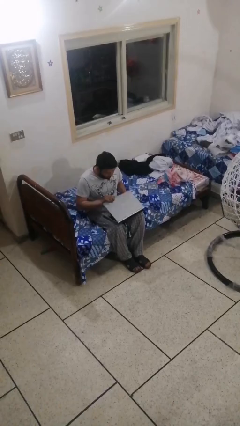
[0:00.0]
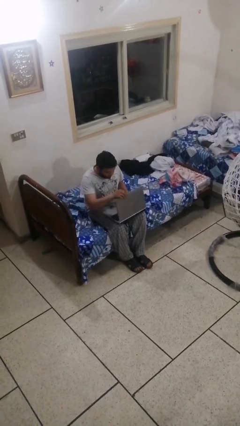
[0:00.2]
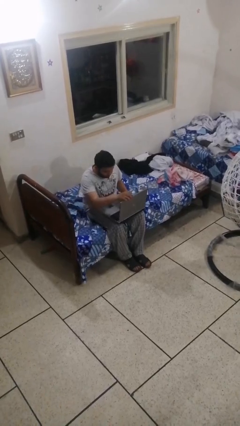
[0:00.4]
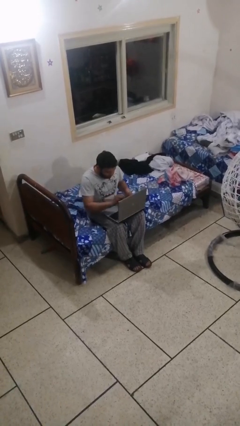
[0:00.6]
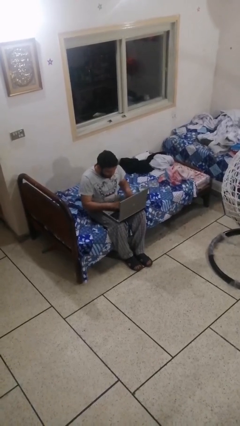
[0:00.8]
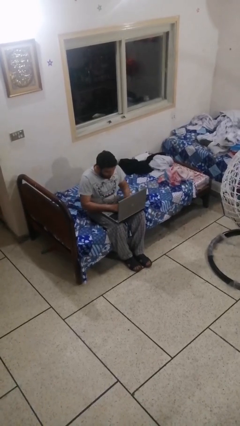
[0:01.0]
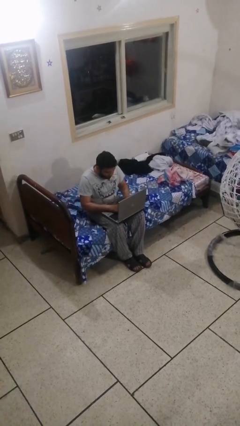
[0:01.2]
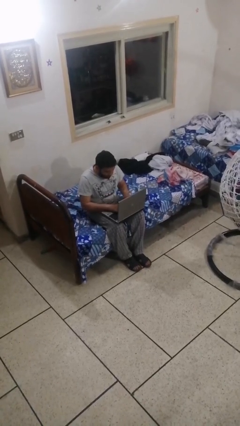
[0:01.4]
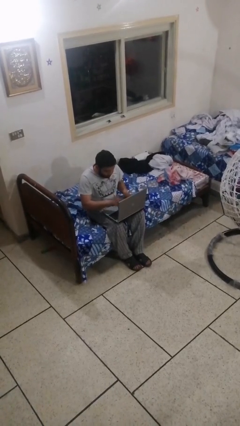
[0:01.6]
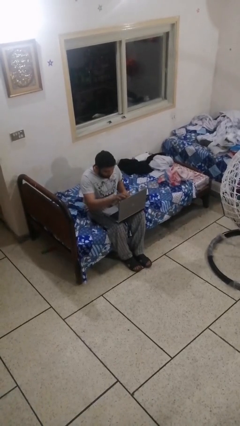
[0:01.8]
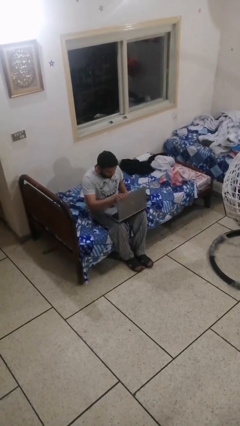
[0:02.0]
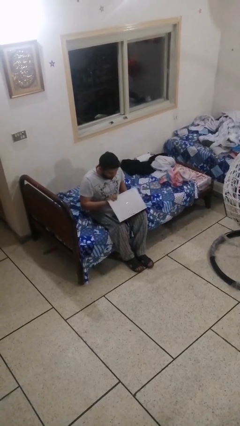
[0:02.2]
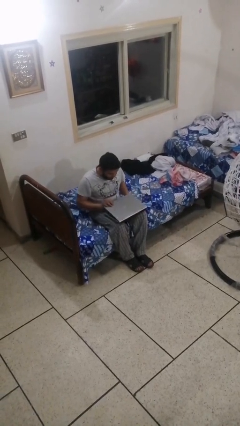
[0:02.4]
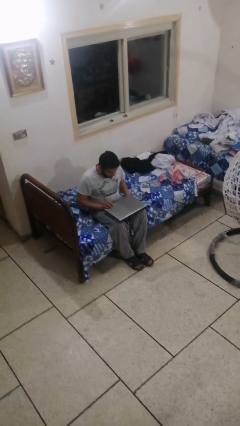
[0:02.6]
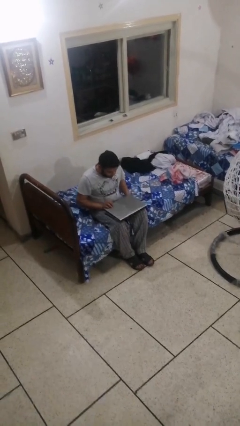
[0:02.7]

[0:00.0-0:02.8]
person interacts with laptop

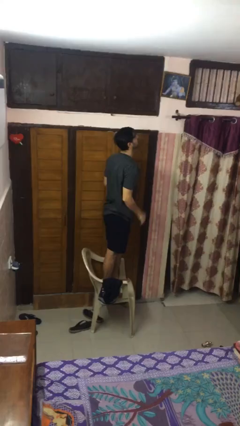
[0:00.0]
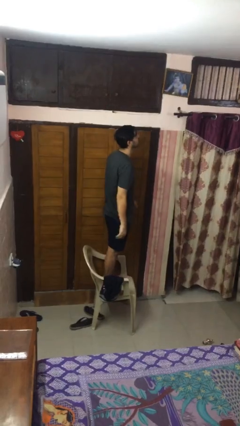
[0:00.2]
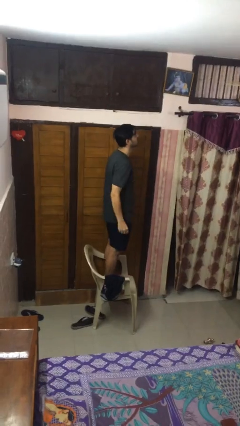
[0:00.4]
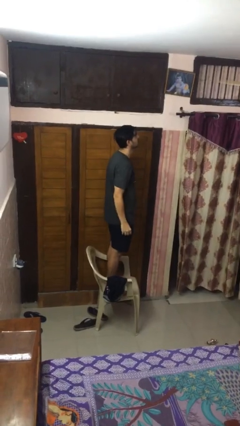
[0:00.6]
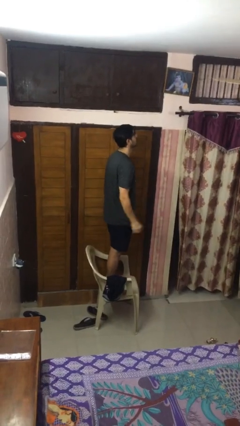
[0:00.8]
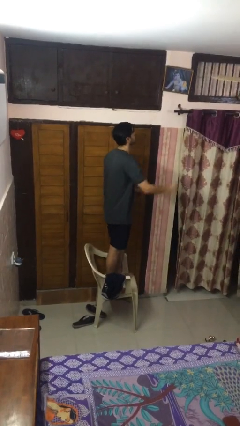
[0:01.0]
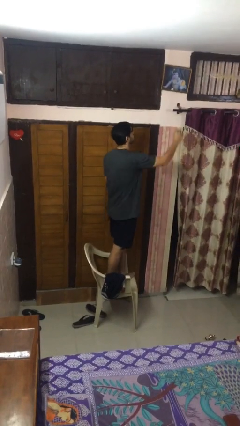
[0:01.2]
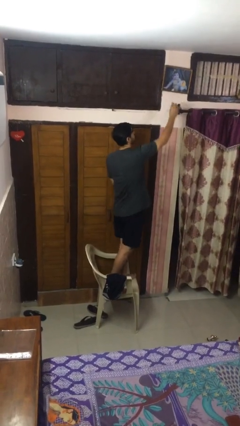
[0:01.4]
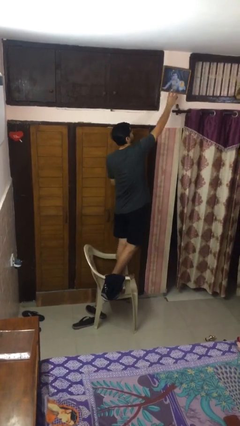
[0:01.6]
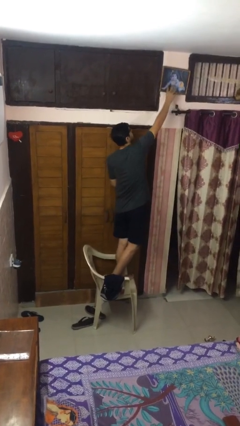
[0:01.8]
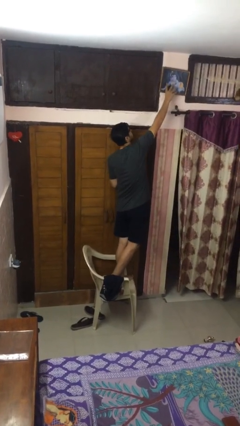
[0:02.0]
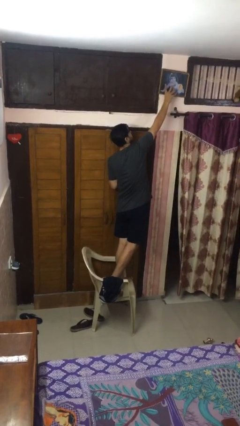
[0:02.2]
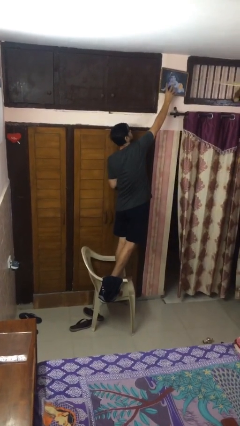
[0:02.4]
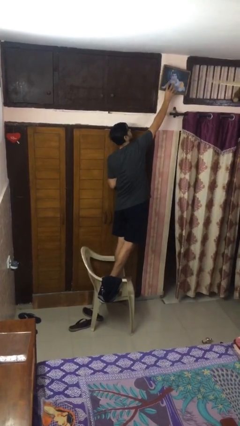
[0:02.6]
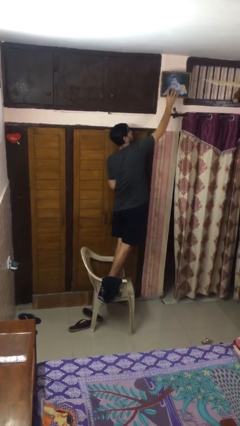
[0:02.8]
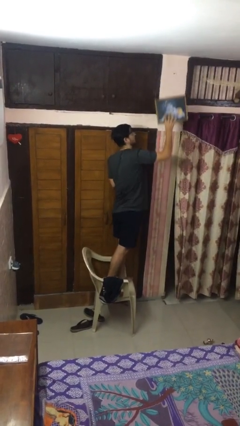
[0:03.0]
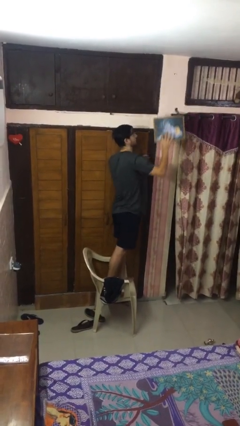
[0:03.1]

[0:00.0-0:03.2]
person takes down picture frame

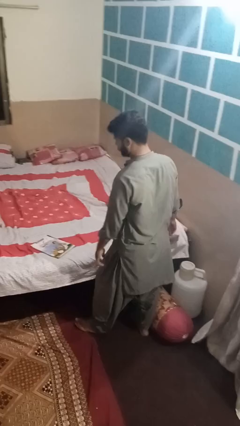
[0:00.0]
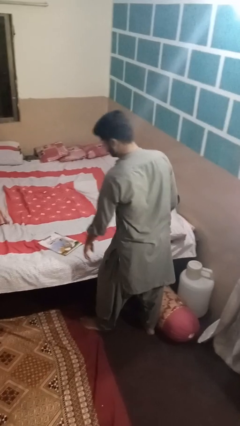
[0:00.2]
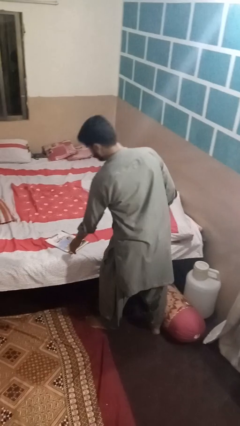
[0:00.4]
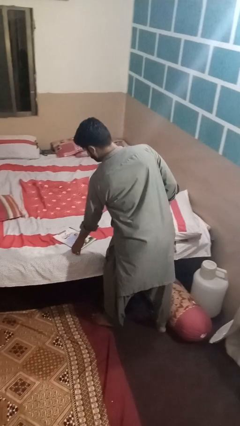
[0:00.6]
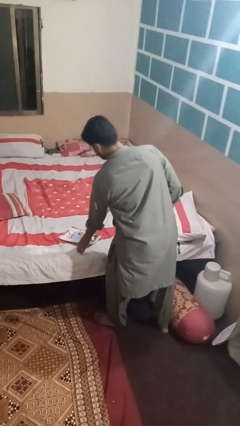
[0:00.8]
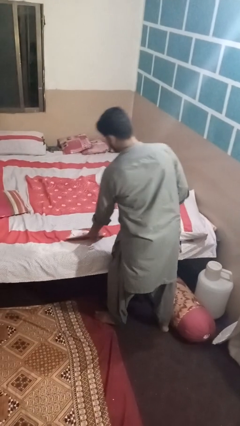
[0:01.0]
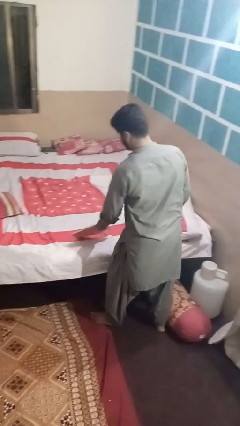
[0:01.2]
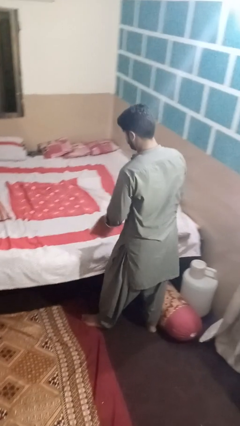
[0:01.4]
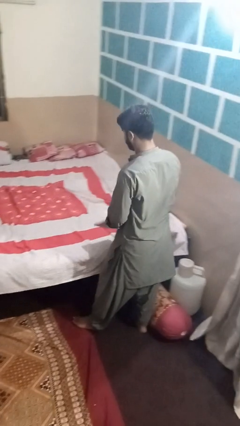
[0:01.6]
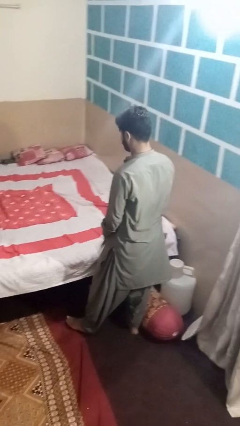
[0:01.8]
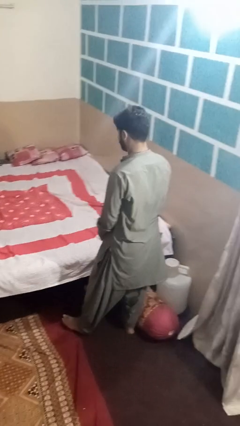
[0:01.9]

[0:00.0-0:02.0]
person picks up object from bed

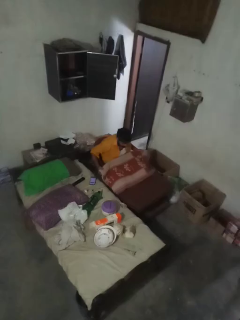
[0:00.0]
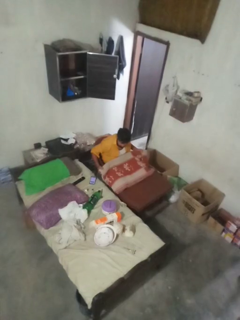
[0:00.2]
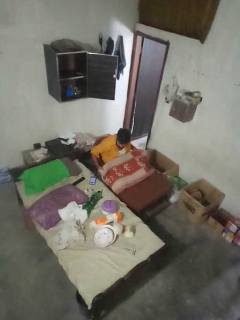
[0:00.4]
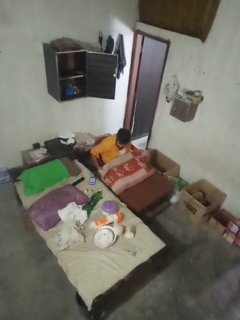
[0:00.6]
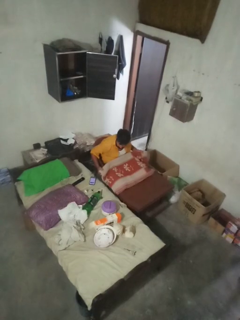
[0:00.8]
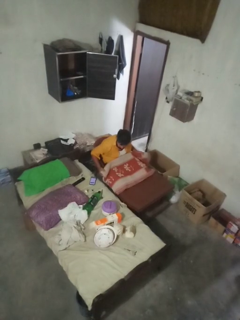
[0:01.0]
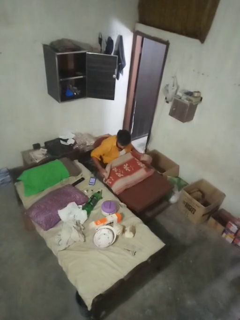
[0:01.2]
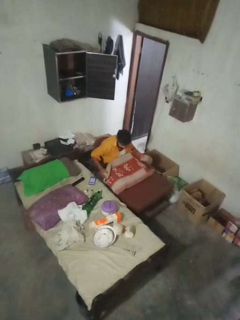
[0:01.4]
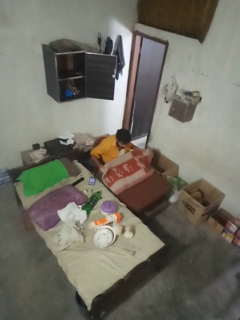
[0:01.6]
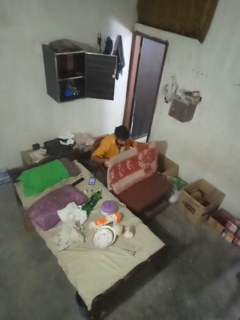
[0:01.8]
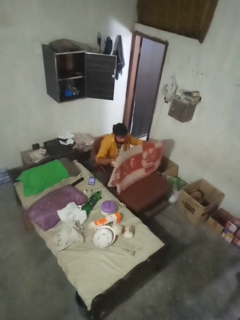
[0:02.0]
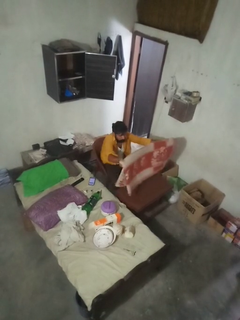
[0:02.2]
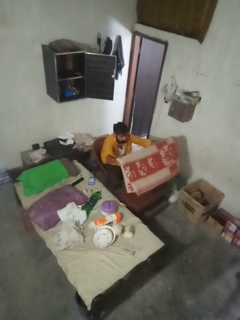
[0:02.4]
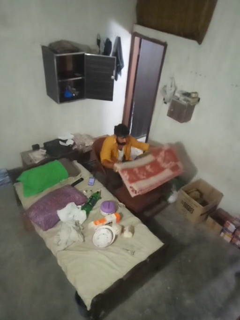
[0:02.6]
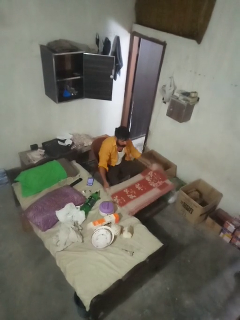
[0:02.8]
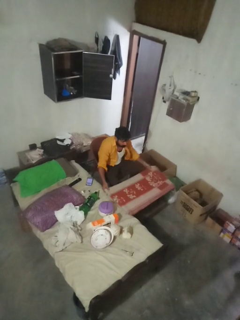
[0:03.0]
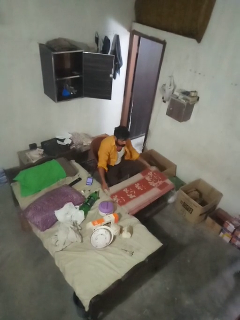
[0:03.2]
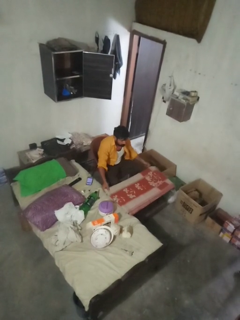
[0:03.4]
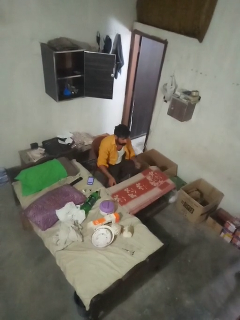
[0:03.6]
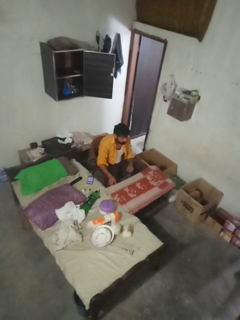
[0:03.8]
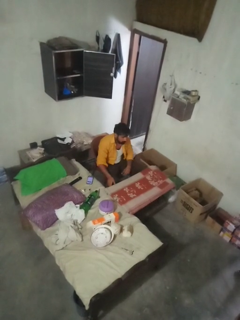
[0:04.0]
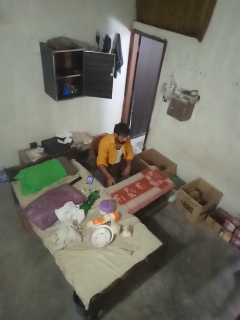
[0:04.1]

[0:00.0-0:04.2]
person spreads tablecloth

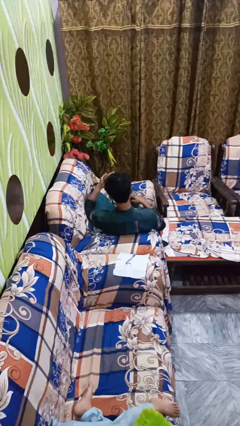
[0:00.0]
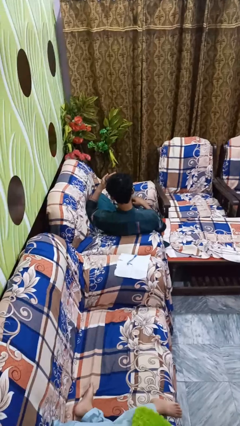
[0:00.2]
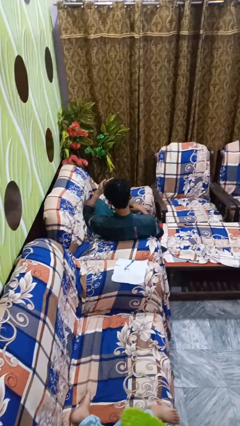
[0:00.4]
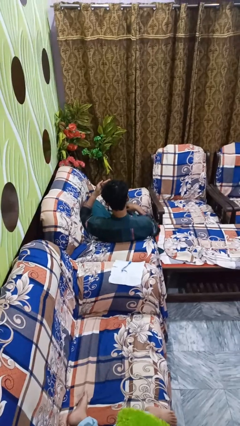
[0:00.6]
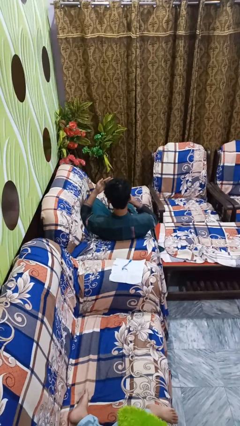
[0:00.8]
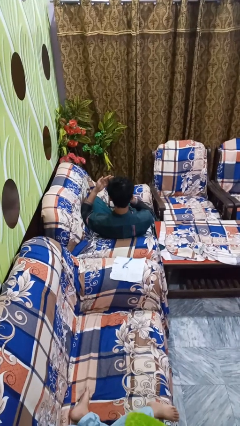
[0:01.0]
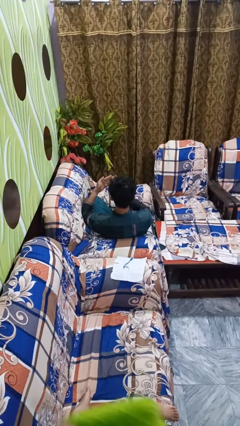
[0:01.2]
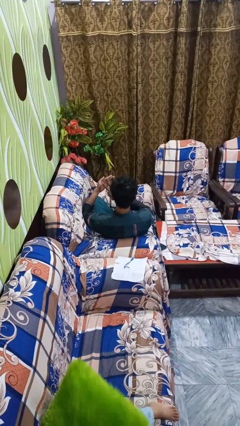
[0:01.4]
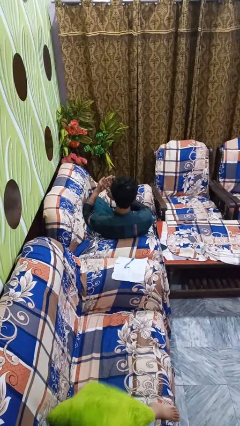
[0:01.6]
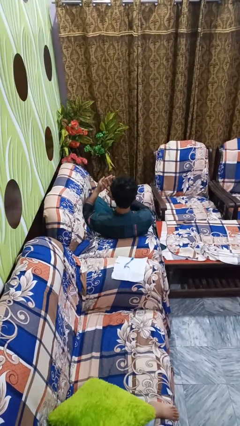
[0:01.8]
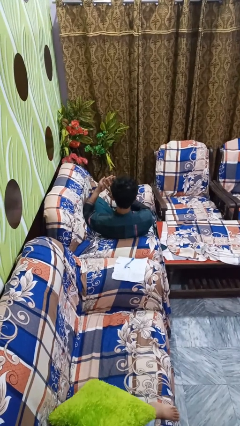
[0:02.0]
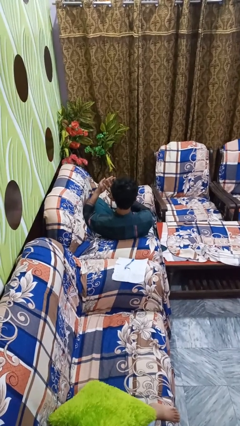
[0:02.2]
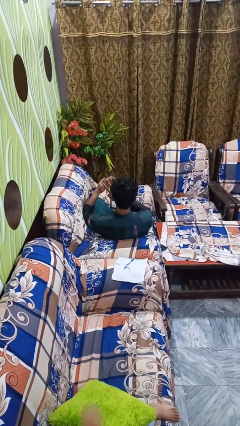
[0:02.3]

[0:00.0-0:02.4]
person gestures number three

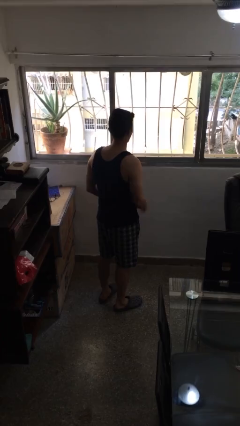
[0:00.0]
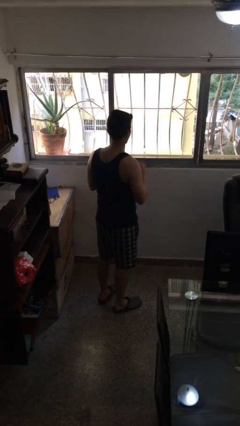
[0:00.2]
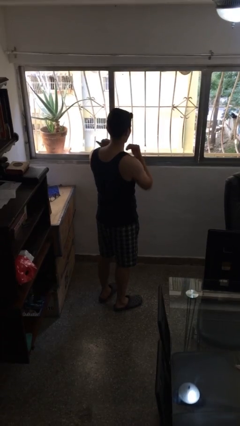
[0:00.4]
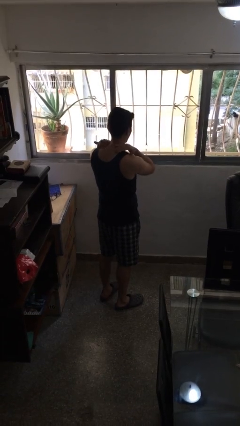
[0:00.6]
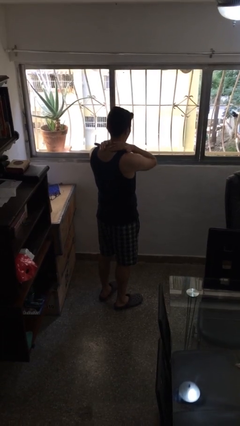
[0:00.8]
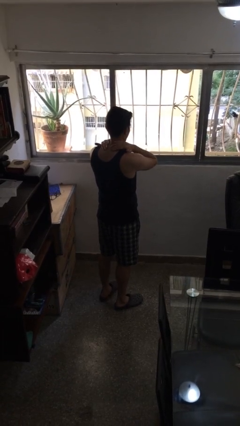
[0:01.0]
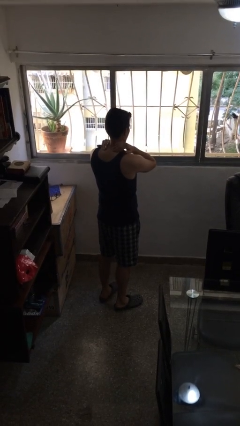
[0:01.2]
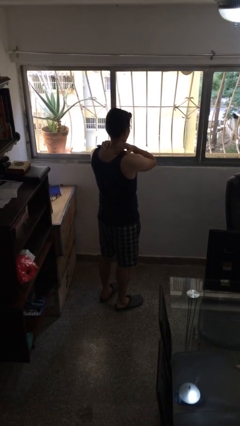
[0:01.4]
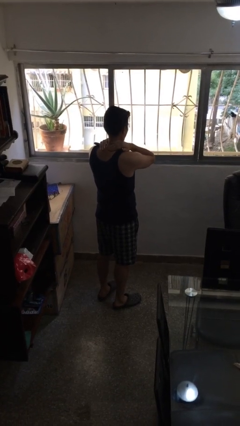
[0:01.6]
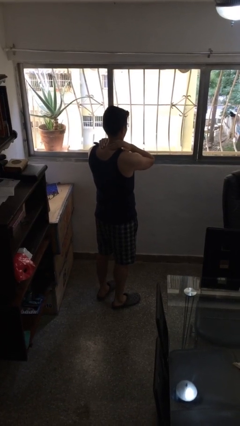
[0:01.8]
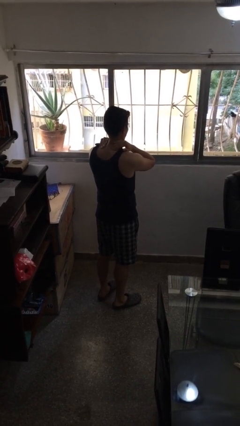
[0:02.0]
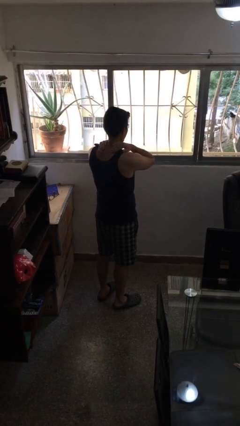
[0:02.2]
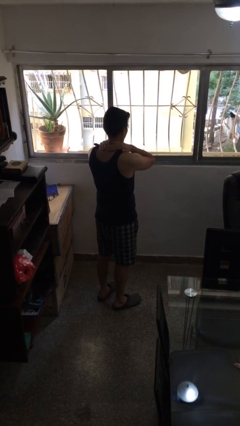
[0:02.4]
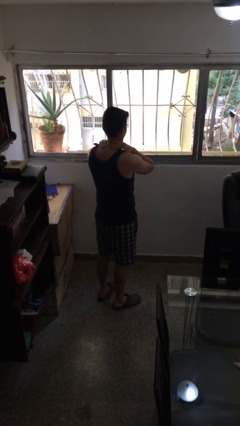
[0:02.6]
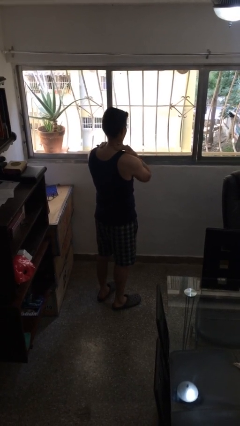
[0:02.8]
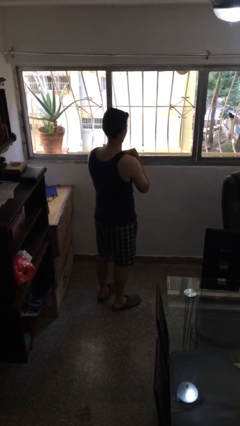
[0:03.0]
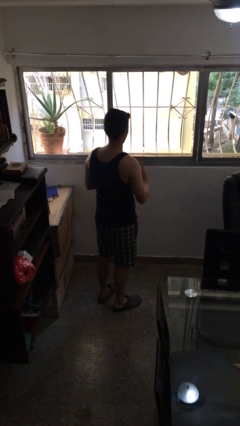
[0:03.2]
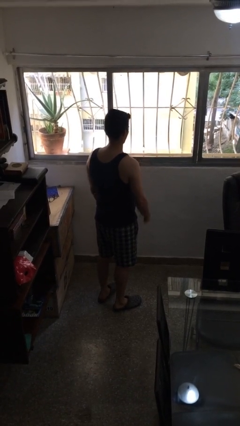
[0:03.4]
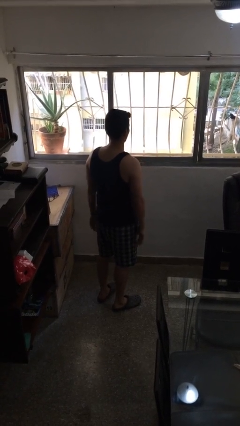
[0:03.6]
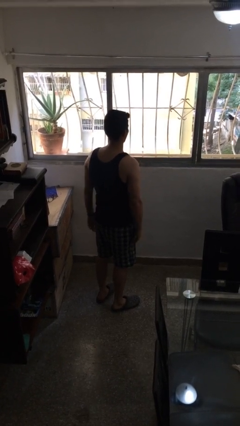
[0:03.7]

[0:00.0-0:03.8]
person rubs neck
